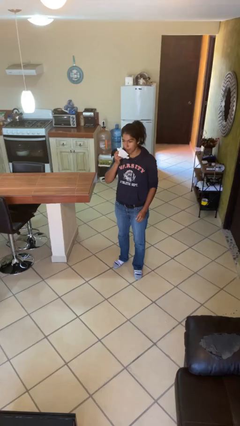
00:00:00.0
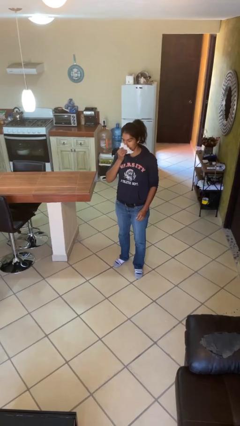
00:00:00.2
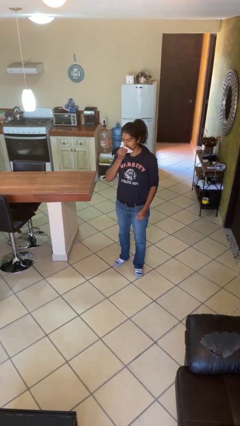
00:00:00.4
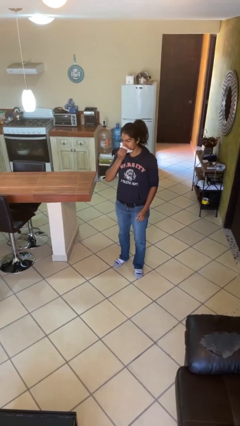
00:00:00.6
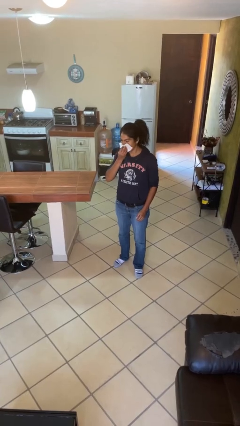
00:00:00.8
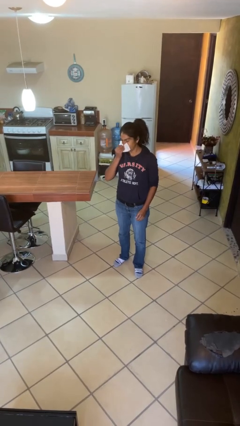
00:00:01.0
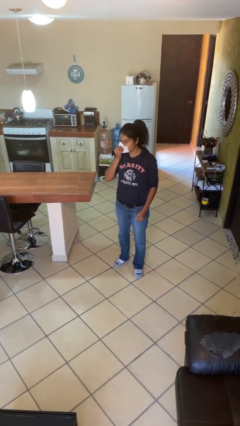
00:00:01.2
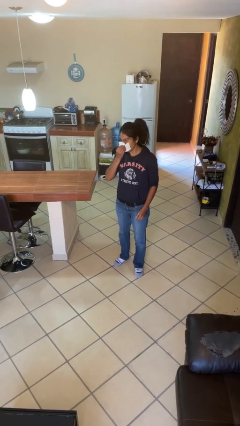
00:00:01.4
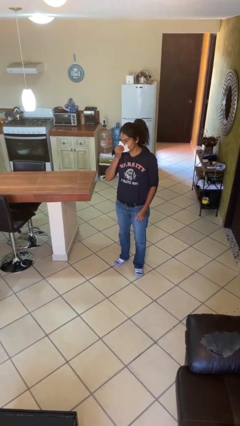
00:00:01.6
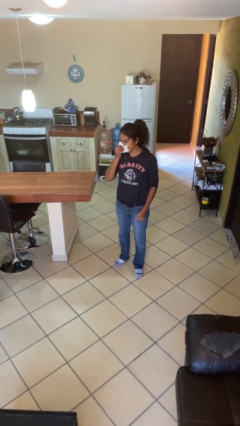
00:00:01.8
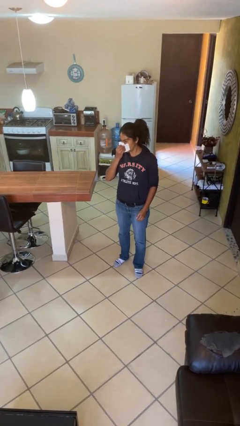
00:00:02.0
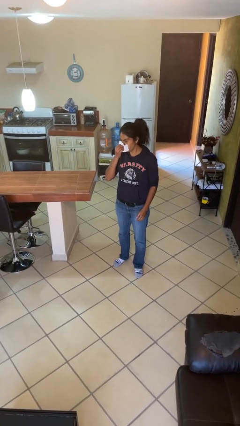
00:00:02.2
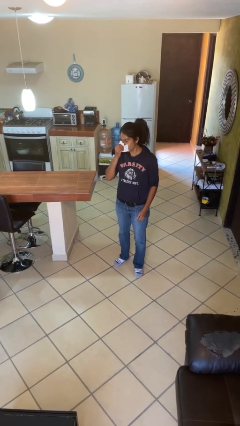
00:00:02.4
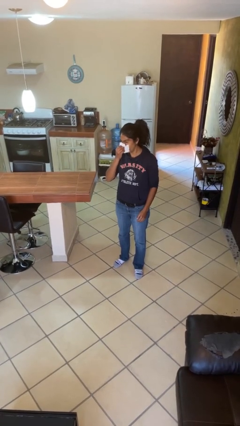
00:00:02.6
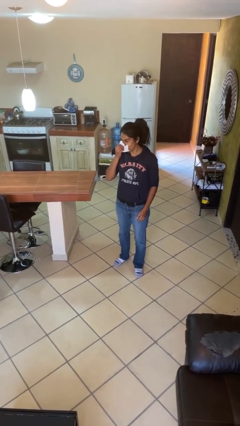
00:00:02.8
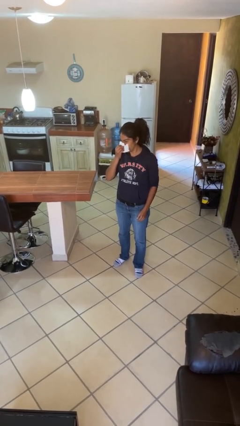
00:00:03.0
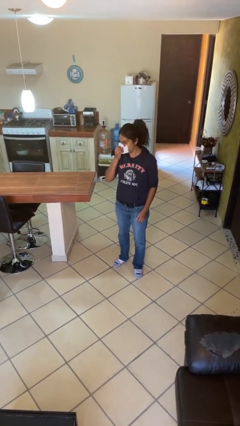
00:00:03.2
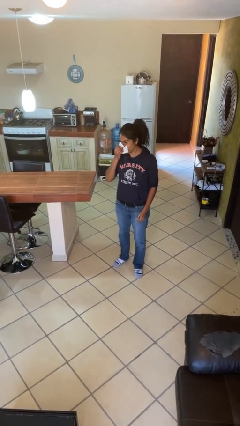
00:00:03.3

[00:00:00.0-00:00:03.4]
person blows nose

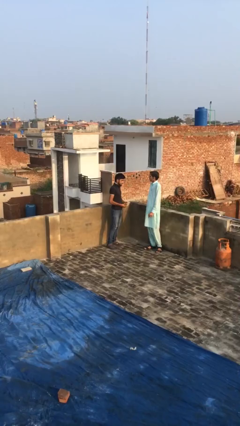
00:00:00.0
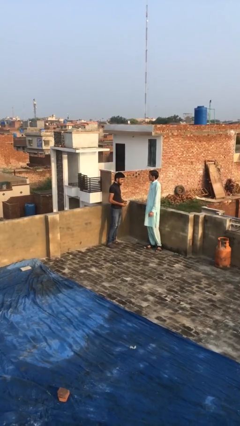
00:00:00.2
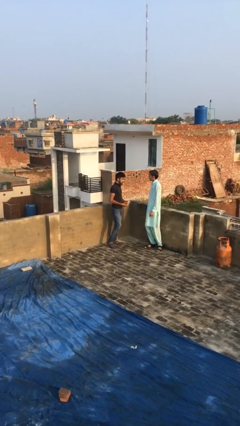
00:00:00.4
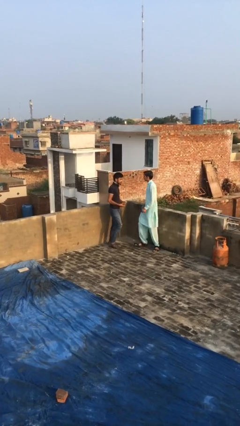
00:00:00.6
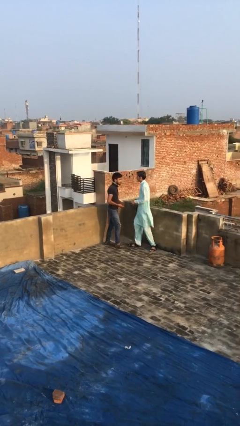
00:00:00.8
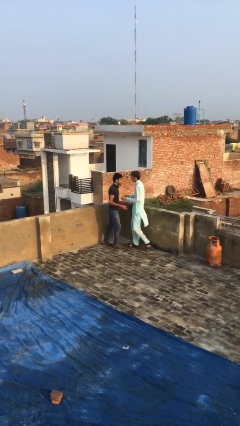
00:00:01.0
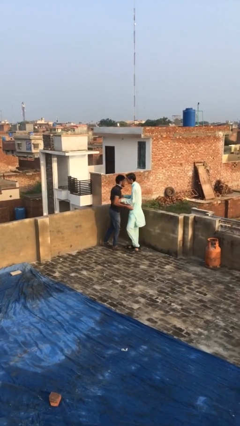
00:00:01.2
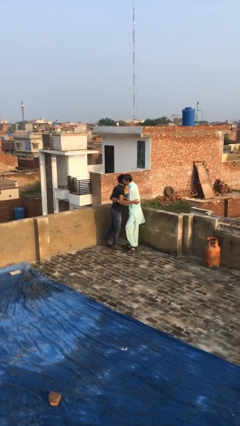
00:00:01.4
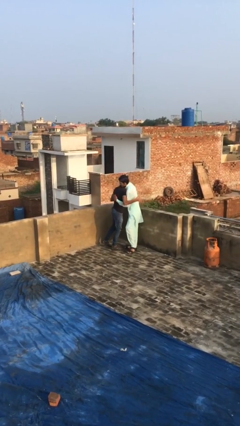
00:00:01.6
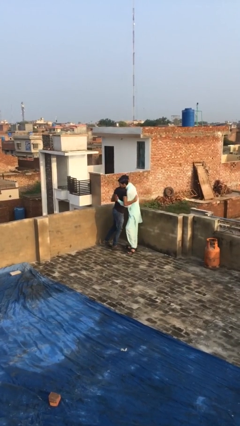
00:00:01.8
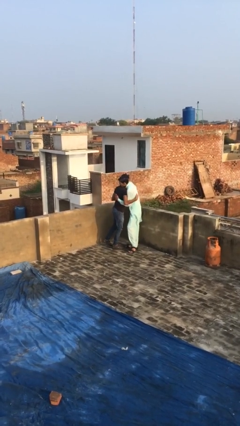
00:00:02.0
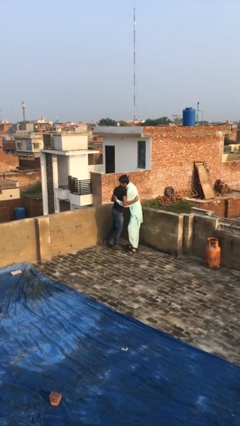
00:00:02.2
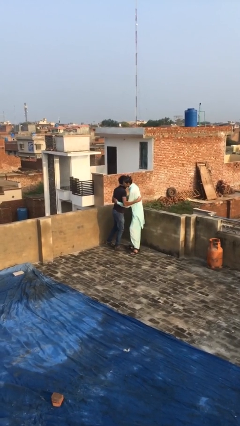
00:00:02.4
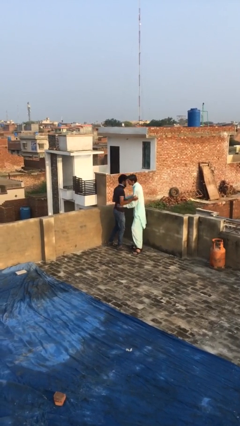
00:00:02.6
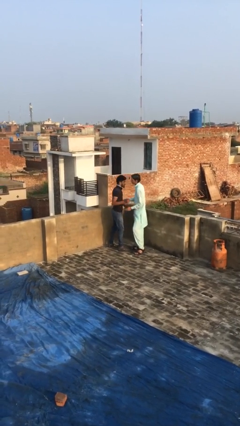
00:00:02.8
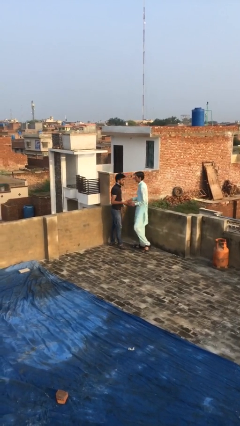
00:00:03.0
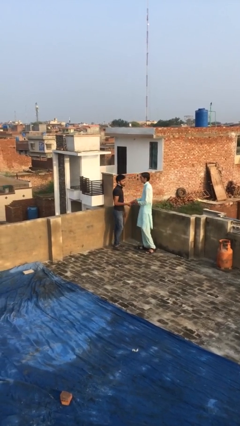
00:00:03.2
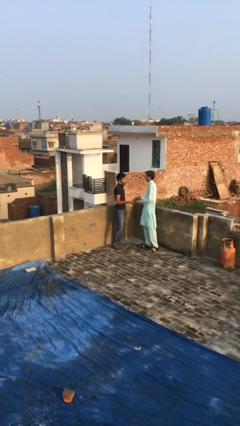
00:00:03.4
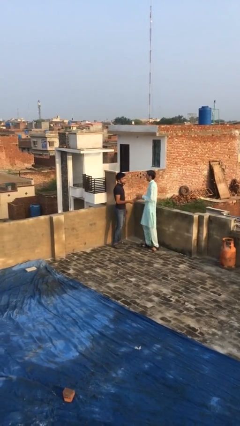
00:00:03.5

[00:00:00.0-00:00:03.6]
person embraces person

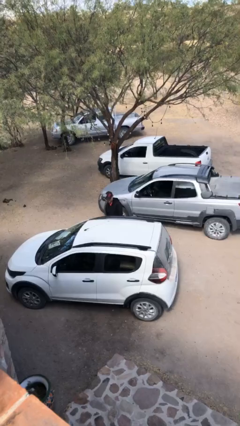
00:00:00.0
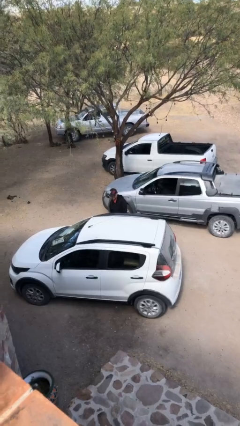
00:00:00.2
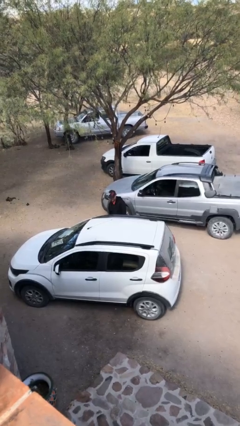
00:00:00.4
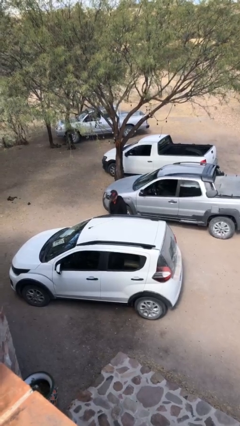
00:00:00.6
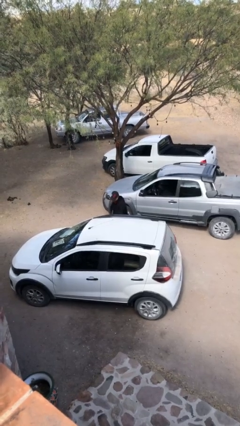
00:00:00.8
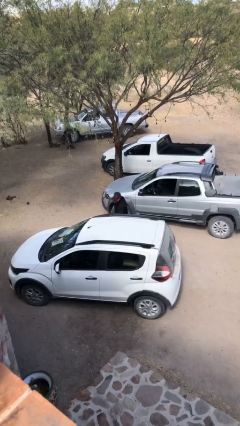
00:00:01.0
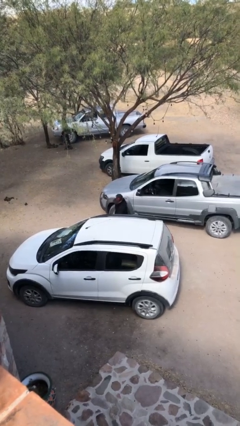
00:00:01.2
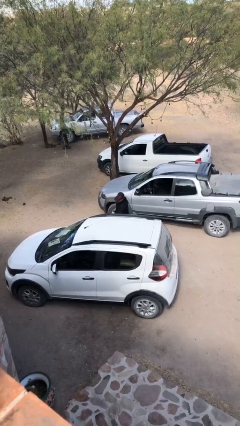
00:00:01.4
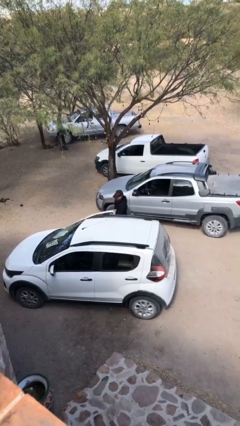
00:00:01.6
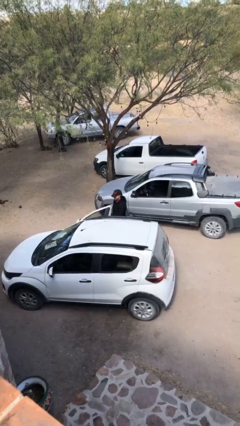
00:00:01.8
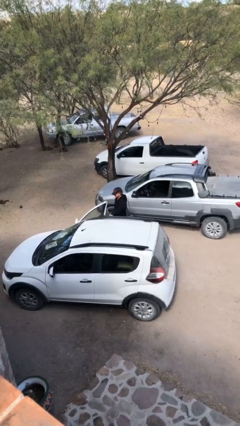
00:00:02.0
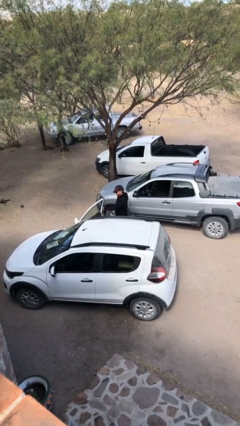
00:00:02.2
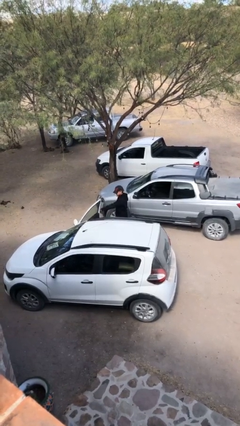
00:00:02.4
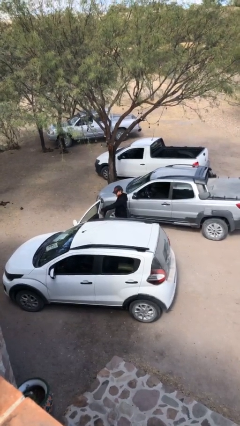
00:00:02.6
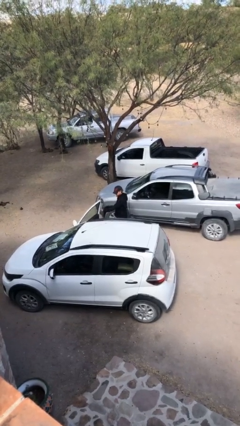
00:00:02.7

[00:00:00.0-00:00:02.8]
person opens car door

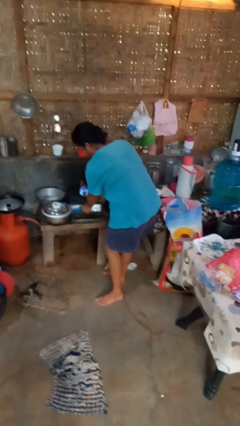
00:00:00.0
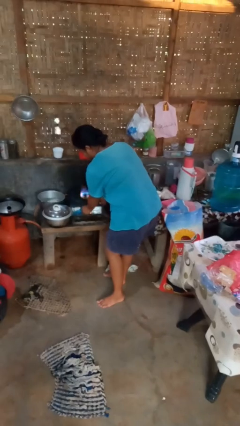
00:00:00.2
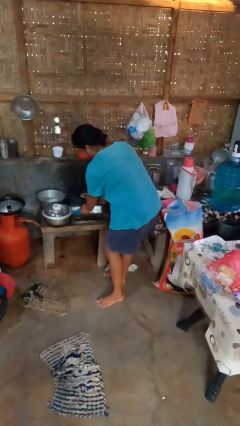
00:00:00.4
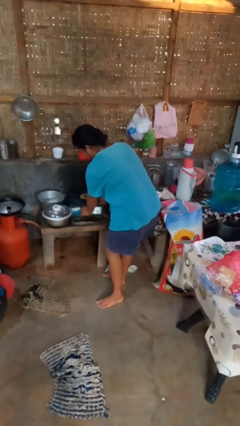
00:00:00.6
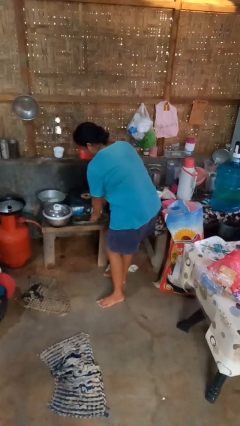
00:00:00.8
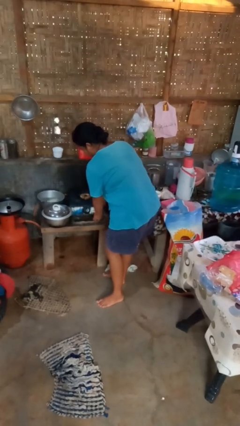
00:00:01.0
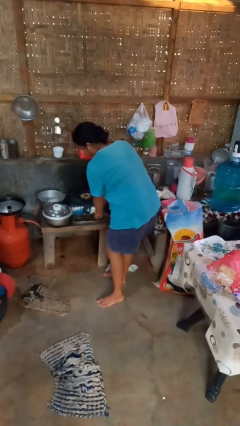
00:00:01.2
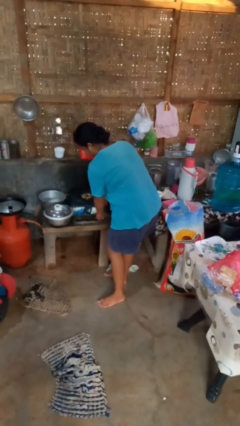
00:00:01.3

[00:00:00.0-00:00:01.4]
person turns off stovetop

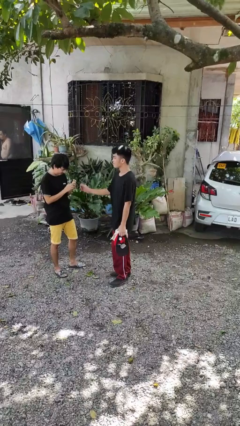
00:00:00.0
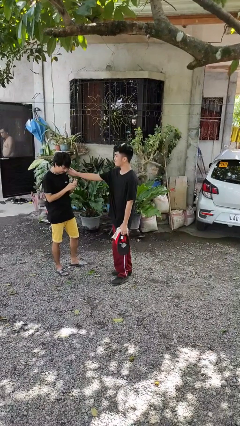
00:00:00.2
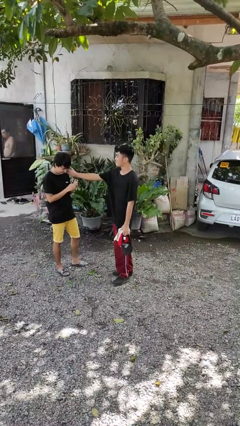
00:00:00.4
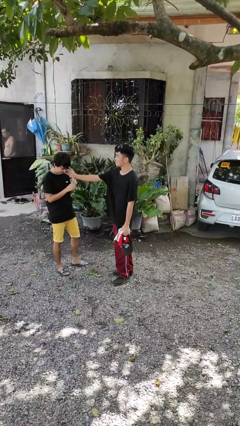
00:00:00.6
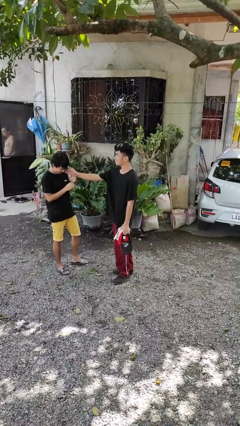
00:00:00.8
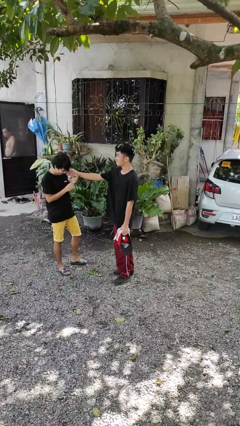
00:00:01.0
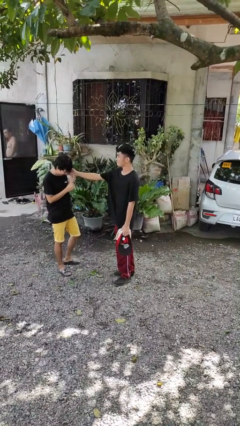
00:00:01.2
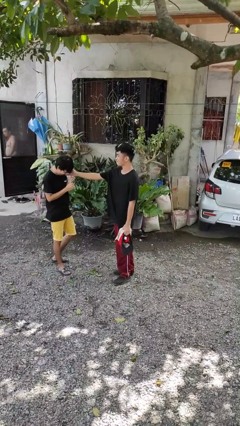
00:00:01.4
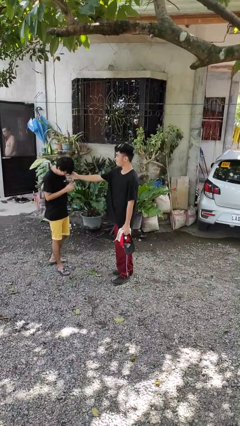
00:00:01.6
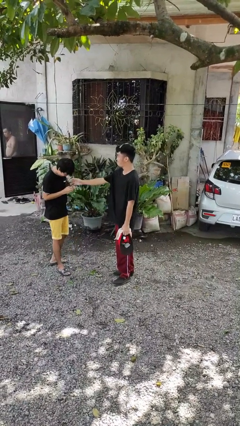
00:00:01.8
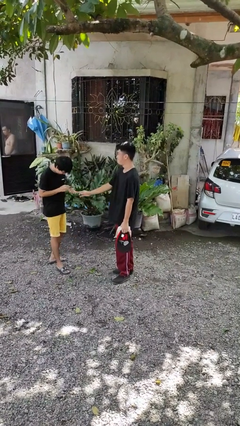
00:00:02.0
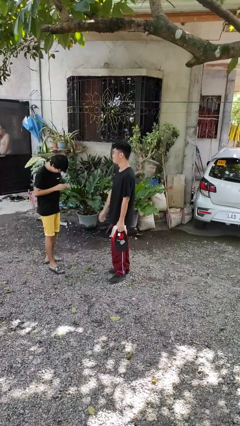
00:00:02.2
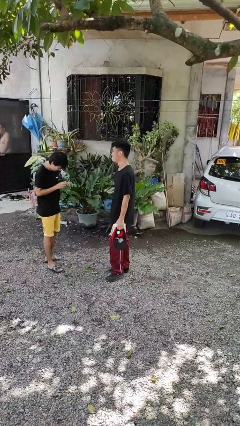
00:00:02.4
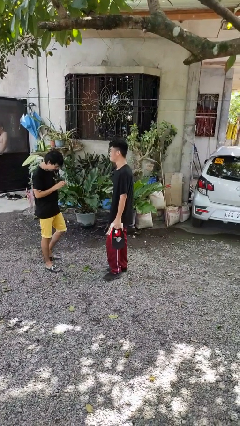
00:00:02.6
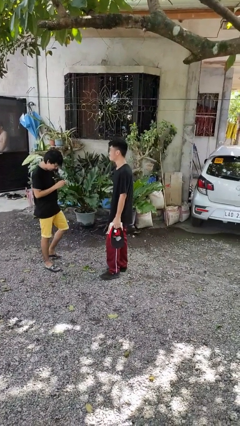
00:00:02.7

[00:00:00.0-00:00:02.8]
person touches face of person

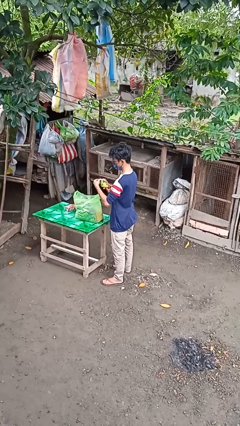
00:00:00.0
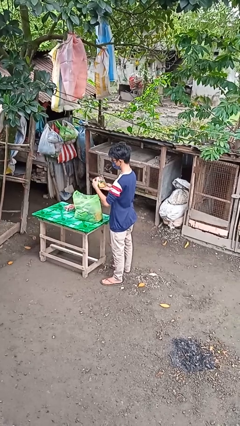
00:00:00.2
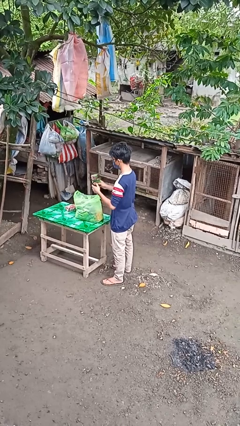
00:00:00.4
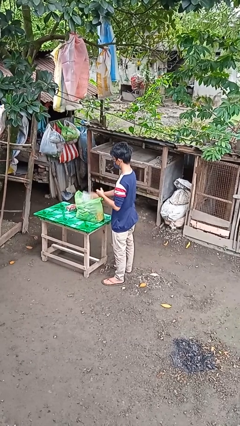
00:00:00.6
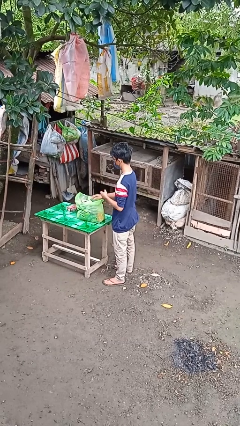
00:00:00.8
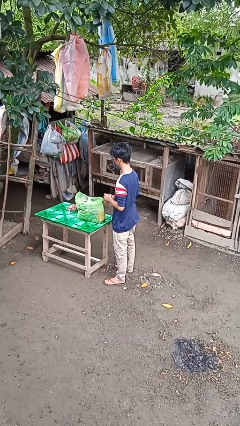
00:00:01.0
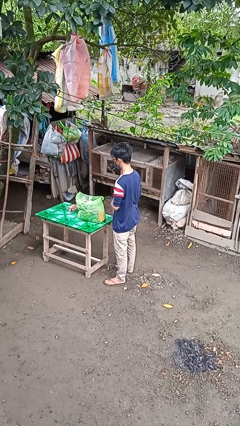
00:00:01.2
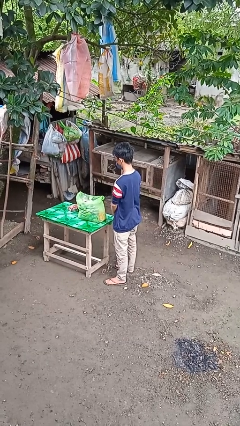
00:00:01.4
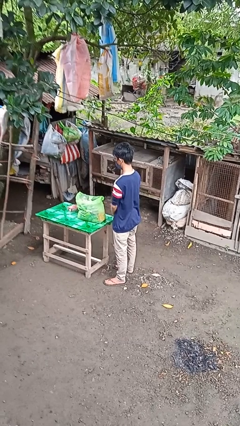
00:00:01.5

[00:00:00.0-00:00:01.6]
person puts object into bag

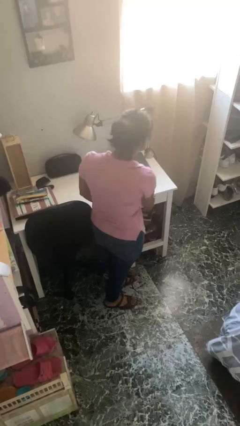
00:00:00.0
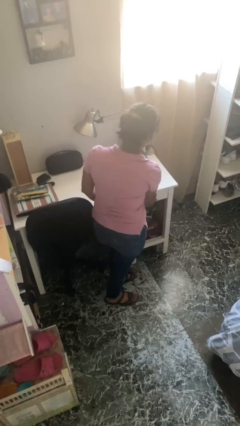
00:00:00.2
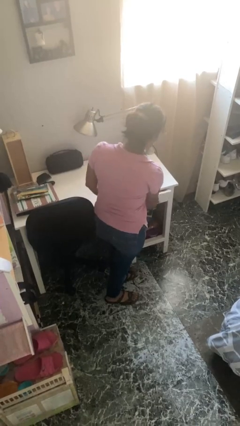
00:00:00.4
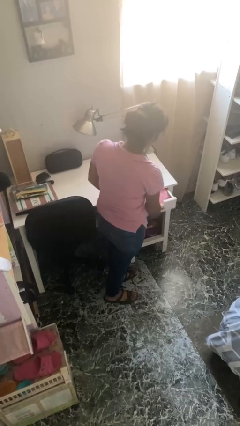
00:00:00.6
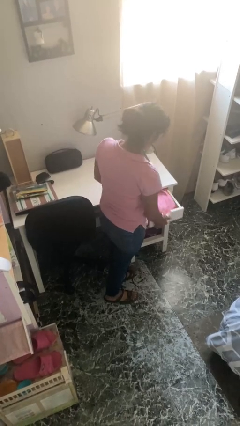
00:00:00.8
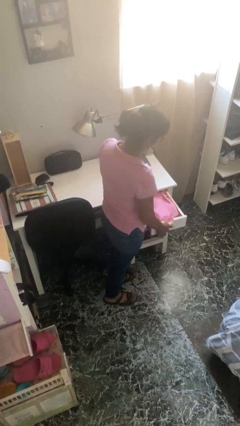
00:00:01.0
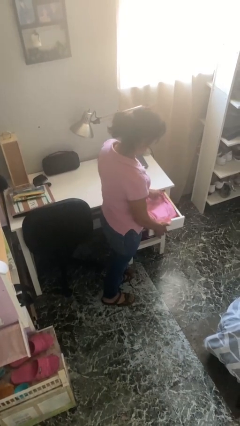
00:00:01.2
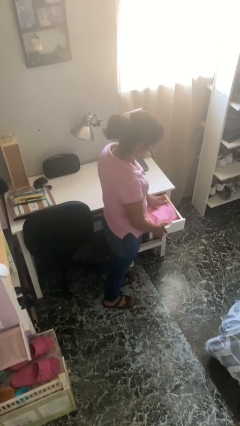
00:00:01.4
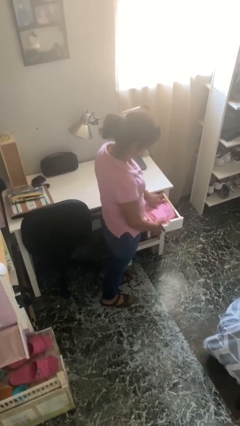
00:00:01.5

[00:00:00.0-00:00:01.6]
person opens dresser drawer
